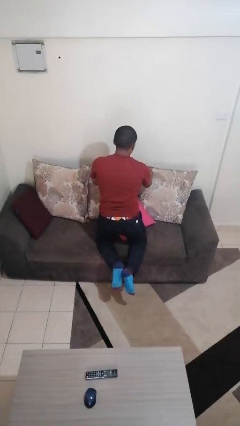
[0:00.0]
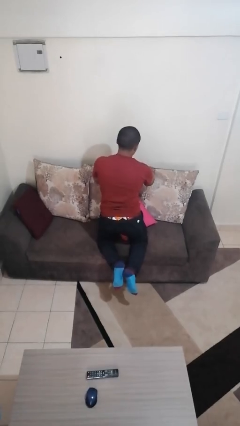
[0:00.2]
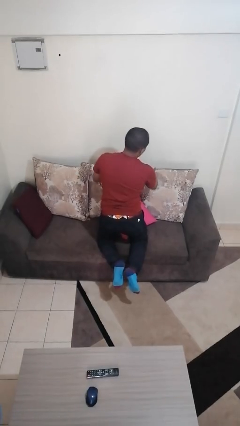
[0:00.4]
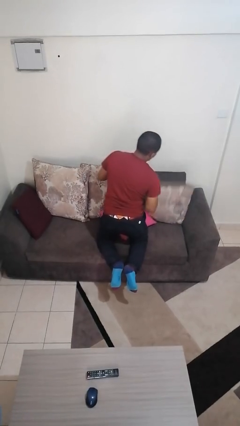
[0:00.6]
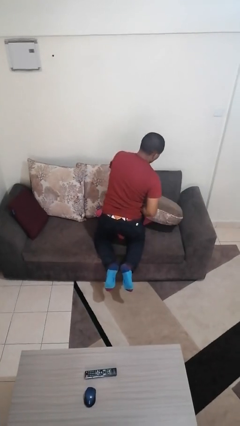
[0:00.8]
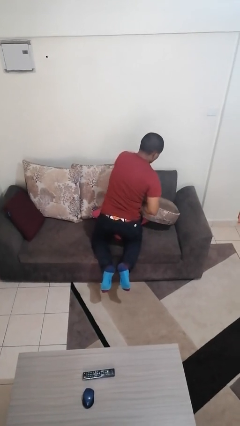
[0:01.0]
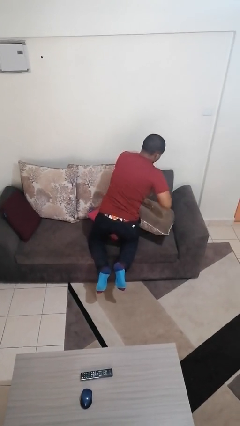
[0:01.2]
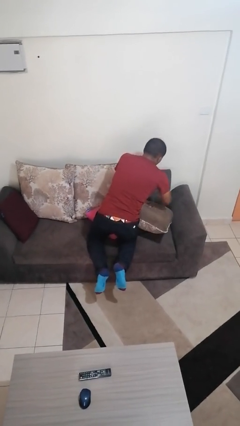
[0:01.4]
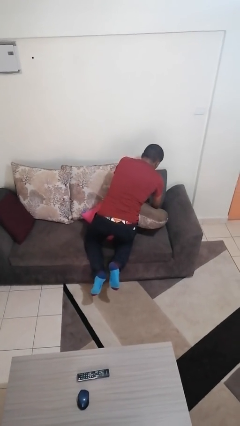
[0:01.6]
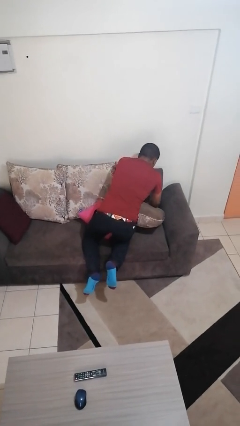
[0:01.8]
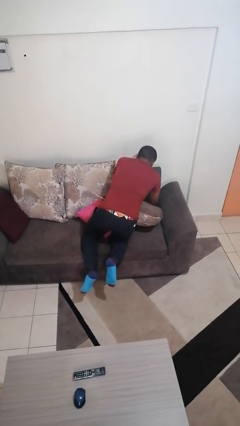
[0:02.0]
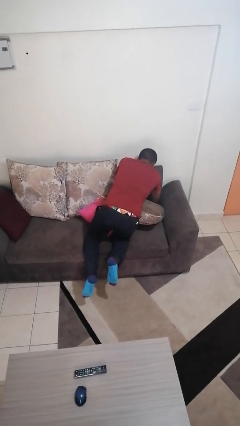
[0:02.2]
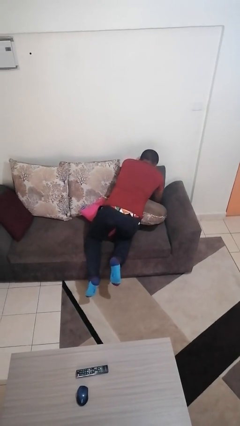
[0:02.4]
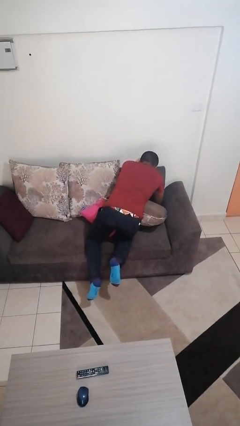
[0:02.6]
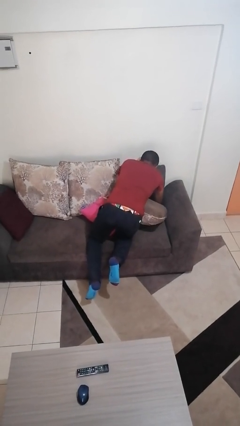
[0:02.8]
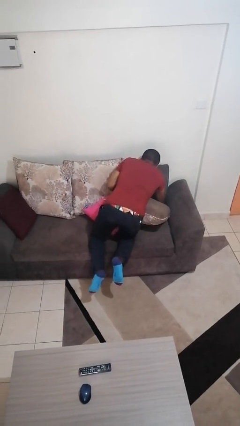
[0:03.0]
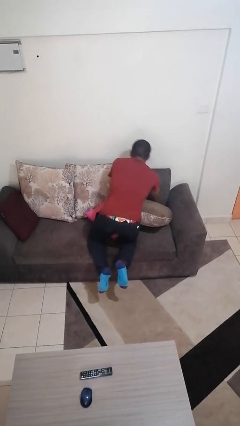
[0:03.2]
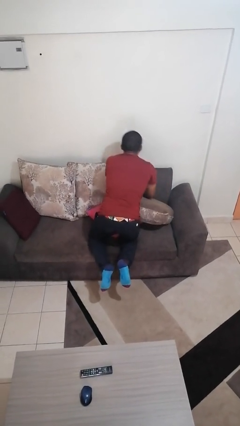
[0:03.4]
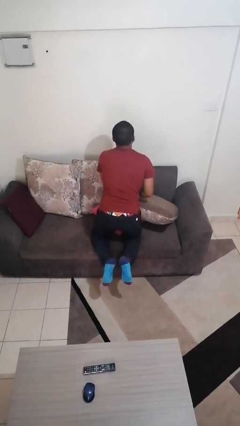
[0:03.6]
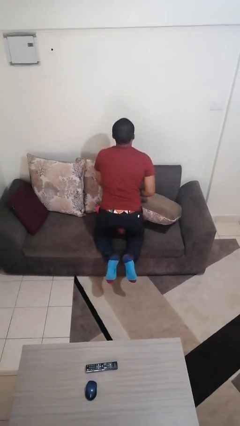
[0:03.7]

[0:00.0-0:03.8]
person searches in couch

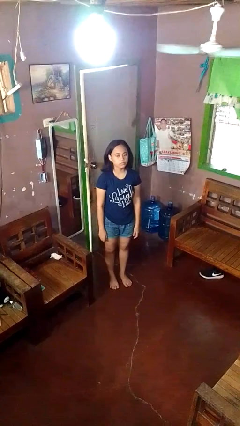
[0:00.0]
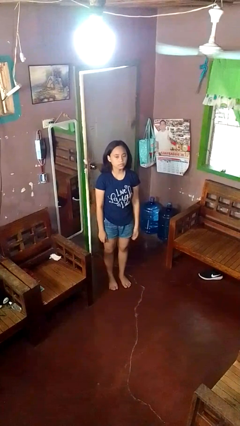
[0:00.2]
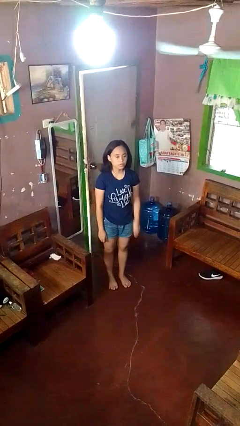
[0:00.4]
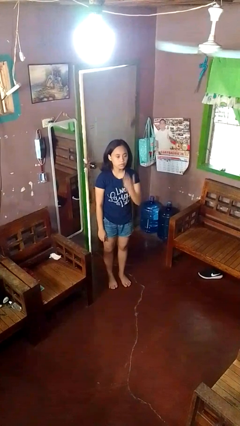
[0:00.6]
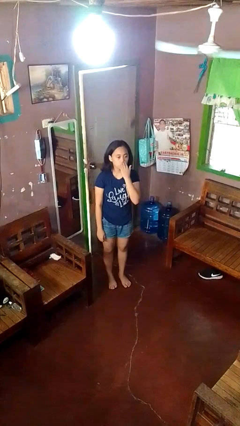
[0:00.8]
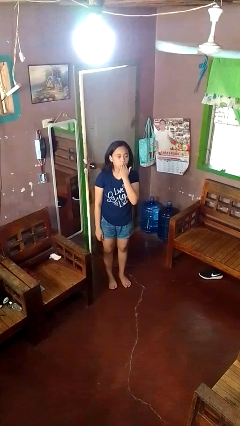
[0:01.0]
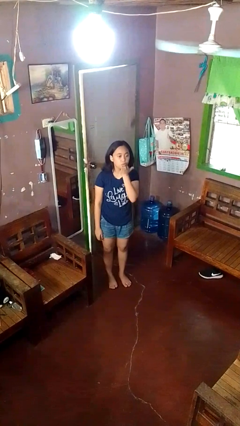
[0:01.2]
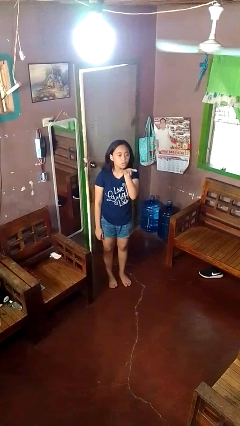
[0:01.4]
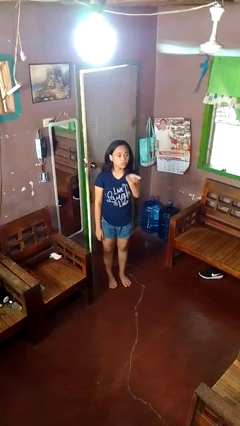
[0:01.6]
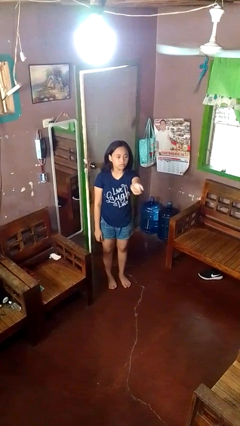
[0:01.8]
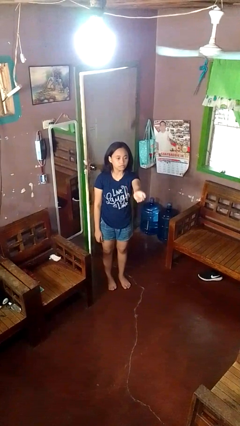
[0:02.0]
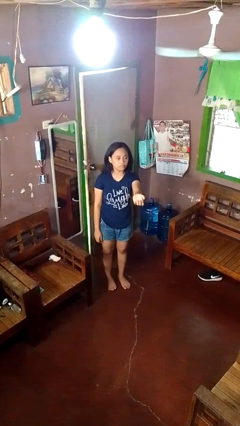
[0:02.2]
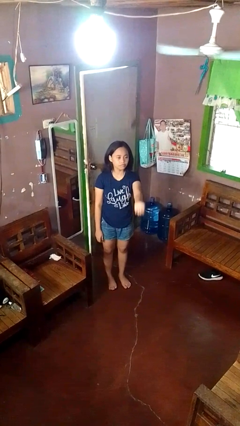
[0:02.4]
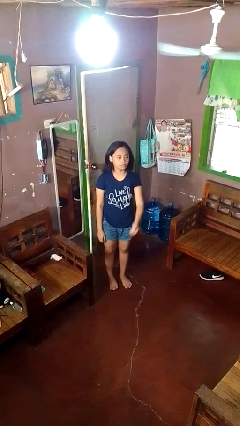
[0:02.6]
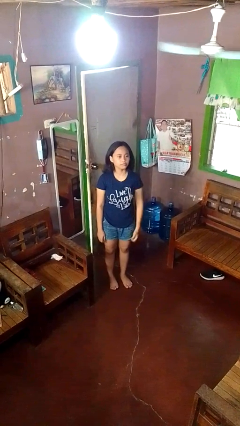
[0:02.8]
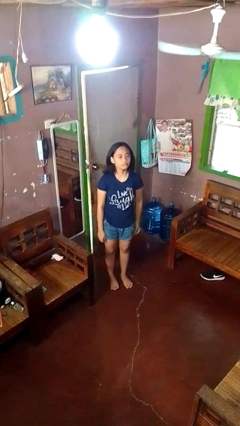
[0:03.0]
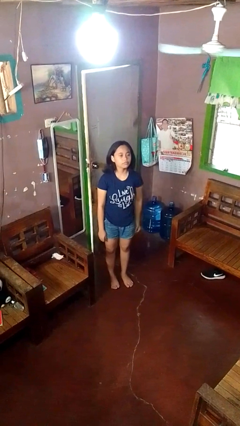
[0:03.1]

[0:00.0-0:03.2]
person gestures blow kiss

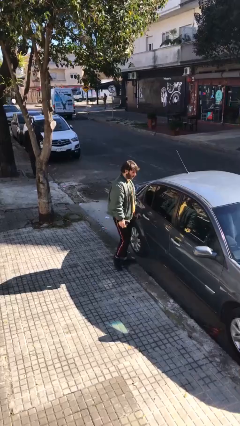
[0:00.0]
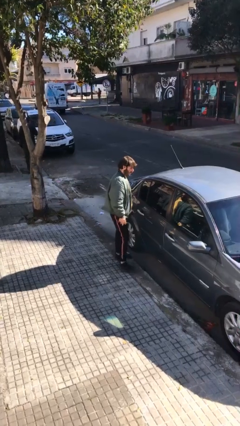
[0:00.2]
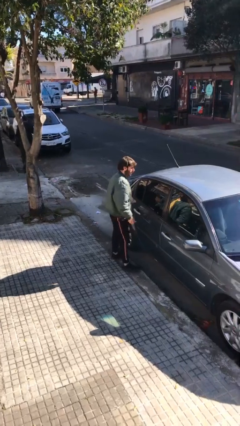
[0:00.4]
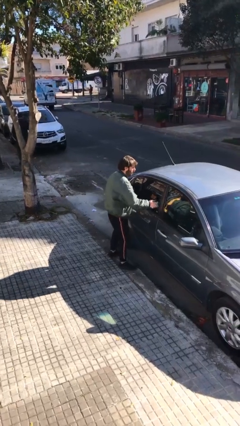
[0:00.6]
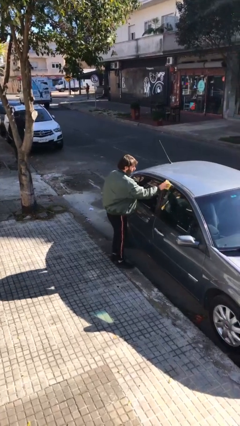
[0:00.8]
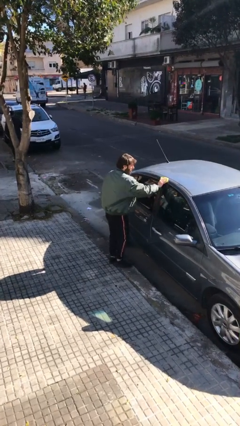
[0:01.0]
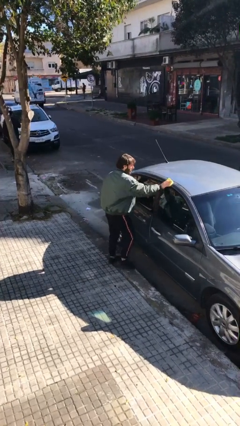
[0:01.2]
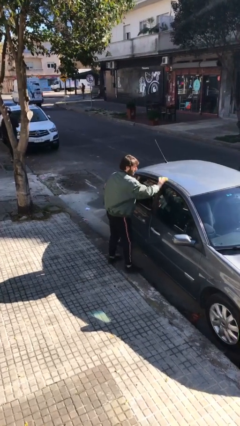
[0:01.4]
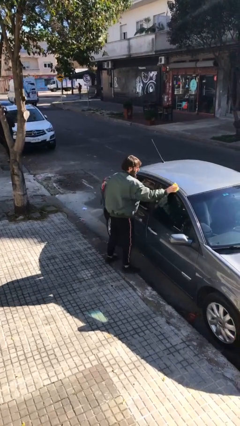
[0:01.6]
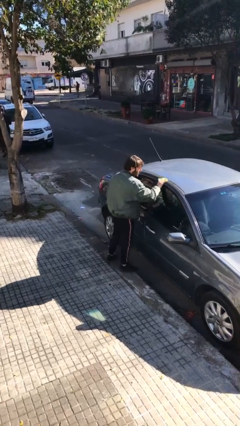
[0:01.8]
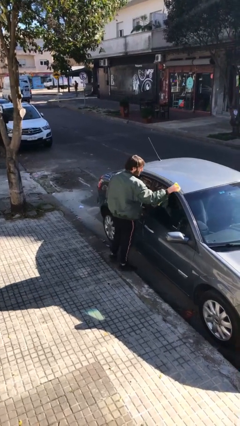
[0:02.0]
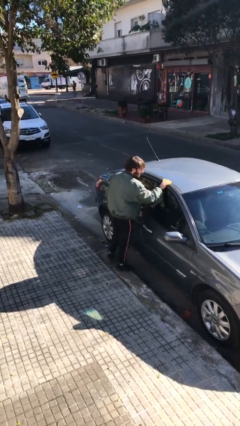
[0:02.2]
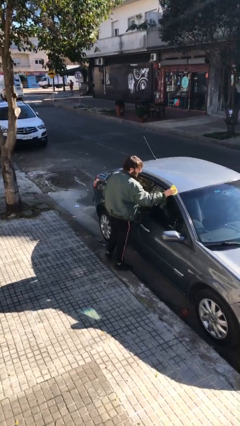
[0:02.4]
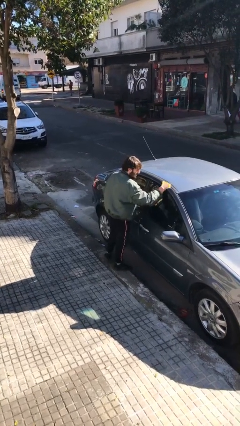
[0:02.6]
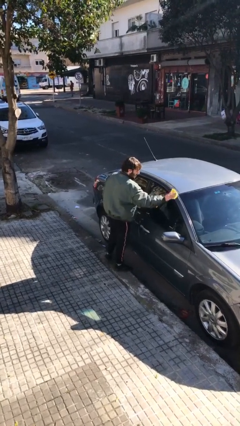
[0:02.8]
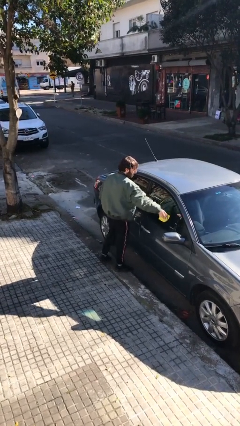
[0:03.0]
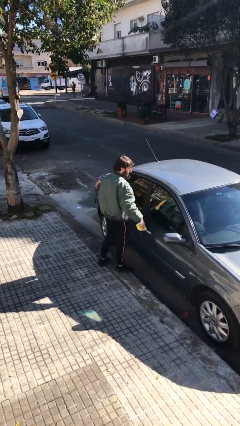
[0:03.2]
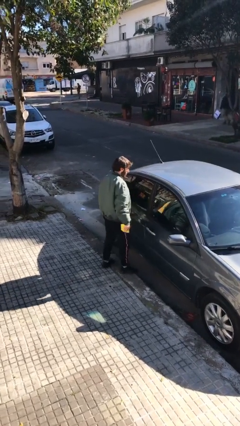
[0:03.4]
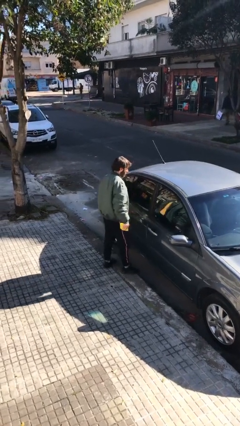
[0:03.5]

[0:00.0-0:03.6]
person polishes car with rag

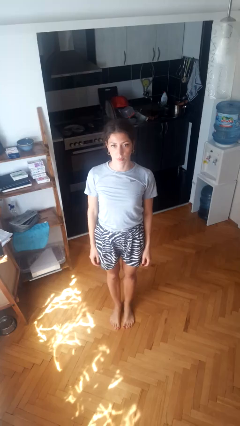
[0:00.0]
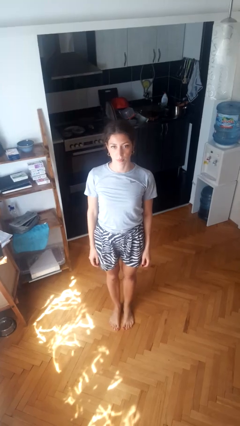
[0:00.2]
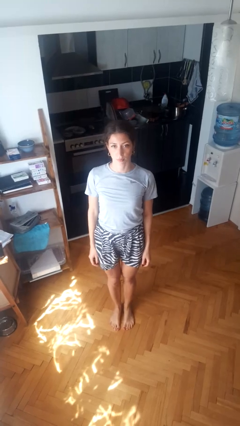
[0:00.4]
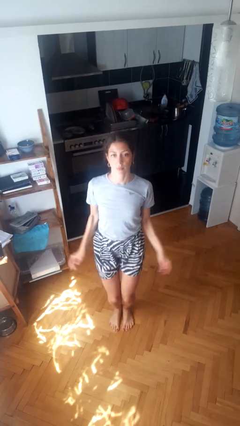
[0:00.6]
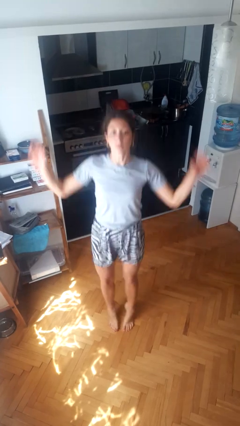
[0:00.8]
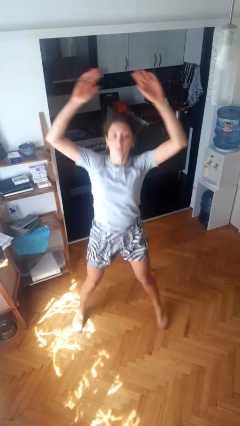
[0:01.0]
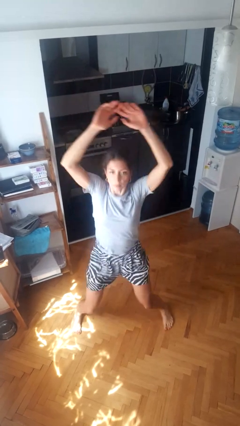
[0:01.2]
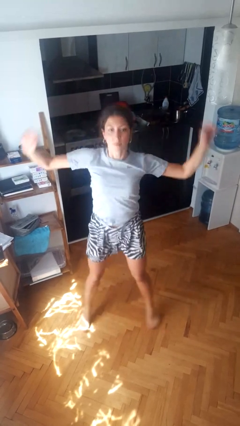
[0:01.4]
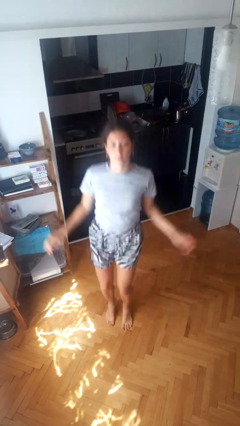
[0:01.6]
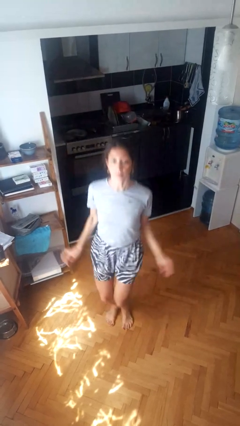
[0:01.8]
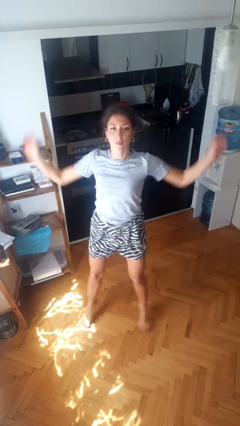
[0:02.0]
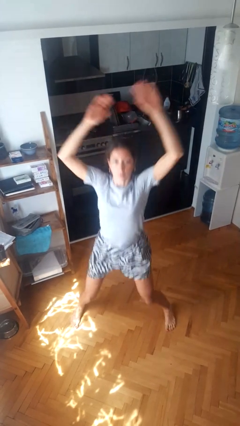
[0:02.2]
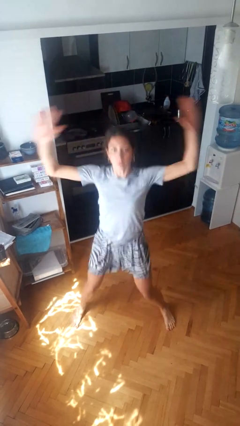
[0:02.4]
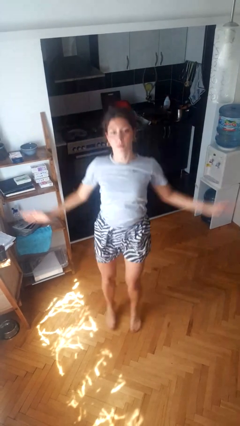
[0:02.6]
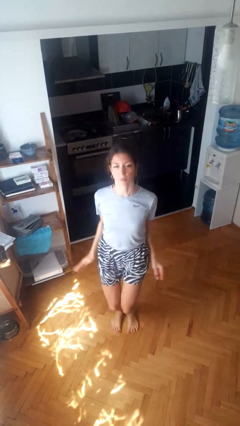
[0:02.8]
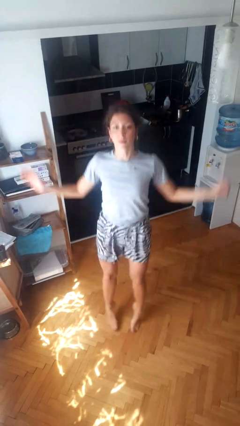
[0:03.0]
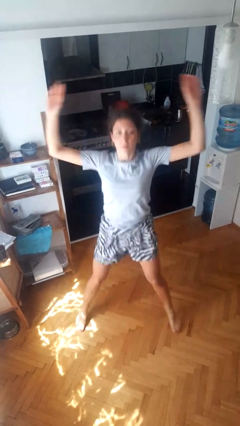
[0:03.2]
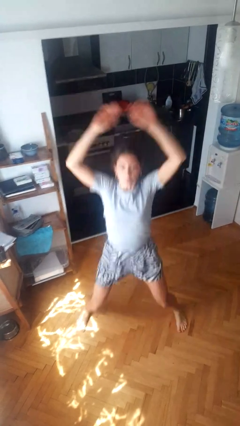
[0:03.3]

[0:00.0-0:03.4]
person exercises with jumping jacks

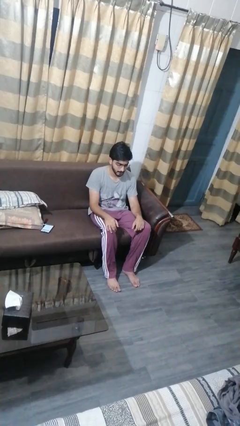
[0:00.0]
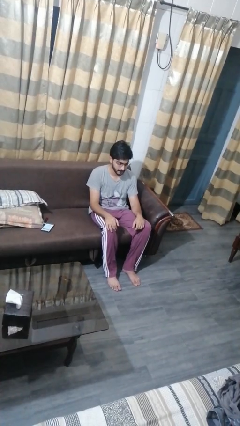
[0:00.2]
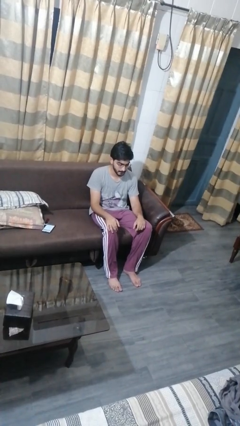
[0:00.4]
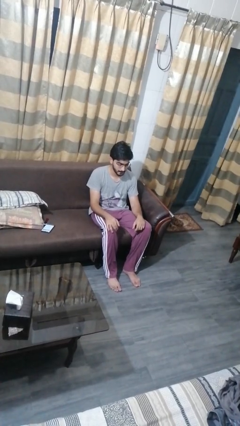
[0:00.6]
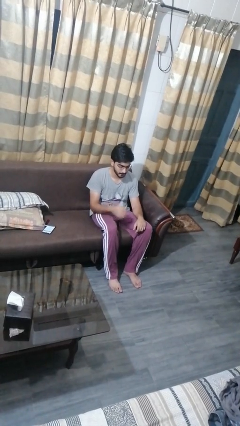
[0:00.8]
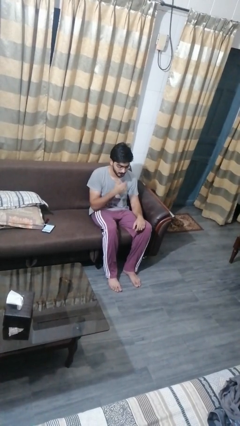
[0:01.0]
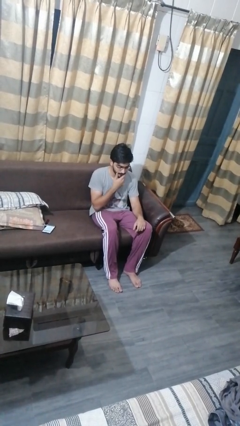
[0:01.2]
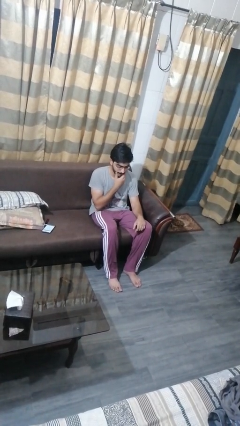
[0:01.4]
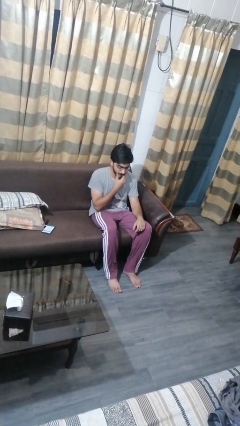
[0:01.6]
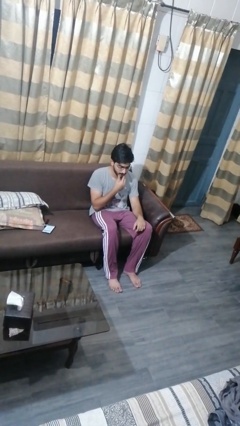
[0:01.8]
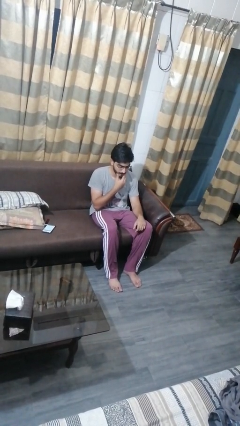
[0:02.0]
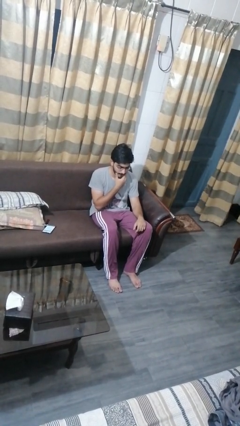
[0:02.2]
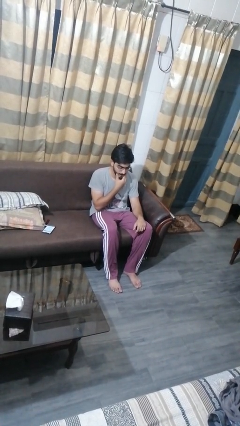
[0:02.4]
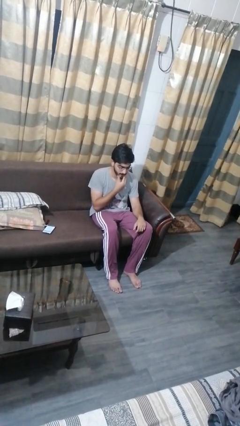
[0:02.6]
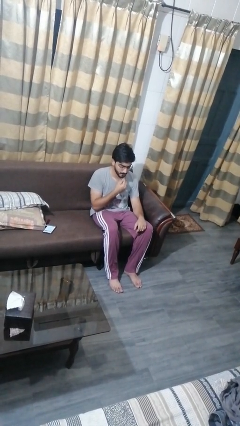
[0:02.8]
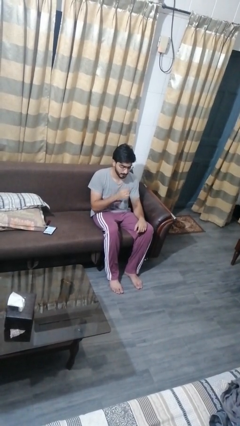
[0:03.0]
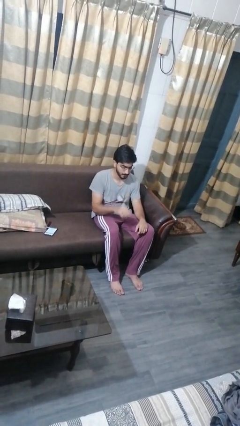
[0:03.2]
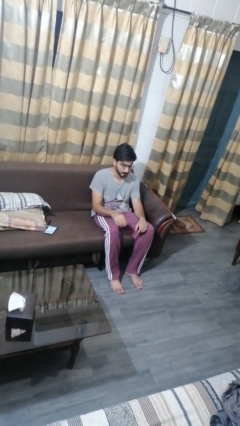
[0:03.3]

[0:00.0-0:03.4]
person strokes chin

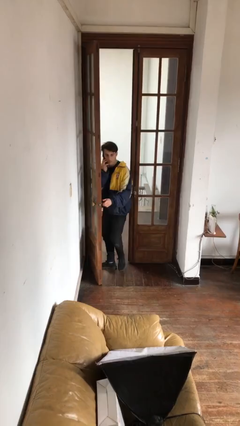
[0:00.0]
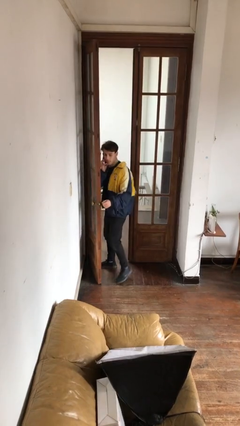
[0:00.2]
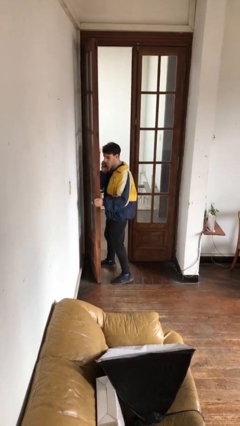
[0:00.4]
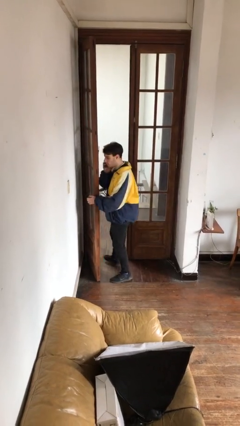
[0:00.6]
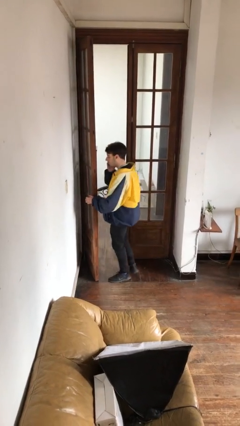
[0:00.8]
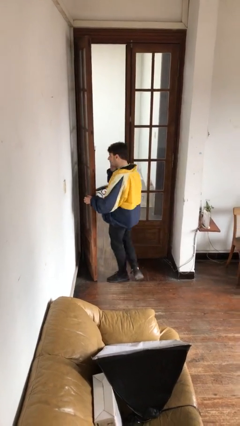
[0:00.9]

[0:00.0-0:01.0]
person enters scene through structure
